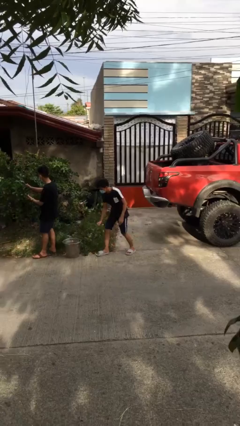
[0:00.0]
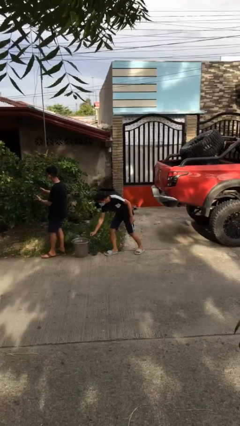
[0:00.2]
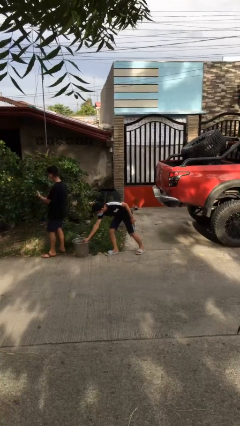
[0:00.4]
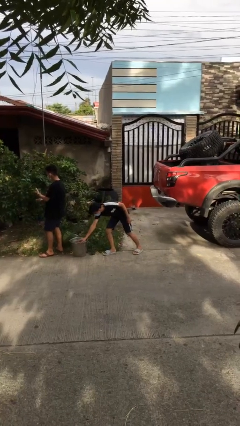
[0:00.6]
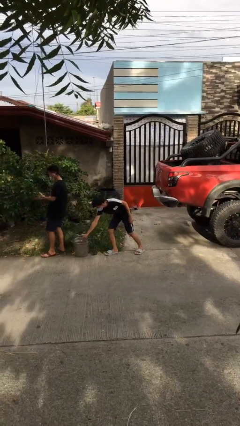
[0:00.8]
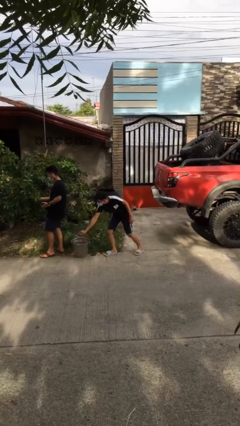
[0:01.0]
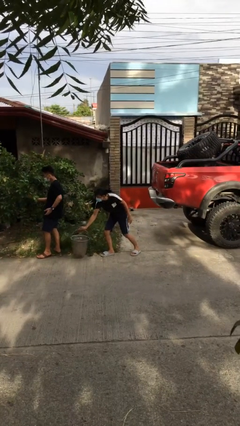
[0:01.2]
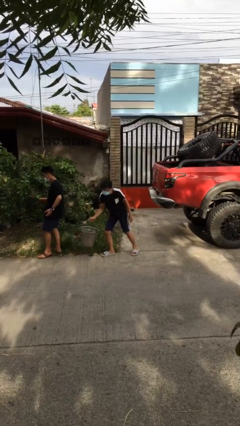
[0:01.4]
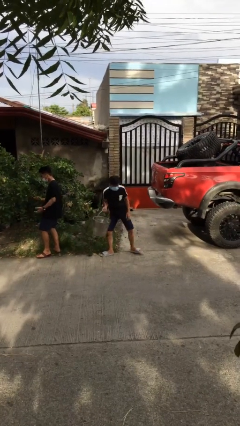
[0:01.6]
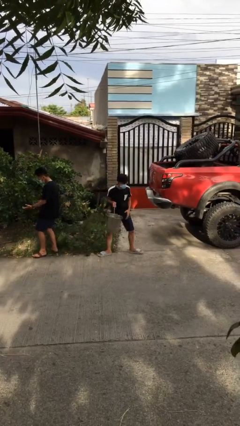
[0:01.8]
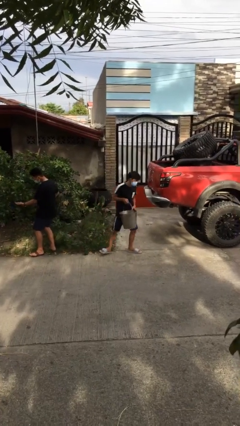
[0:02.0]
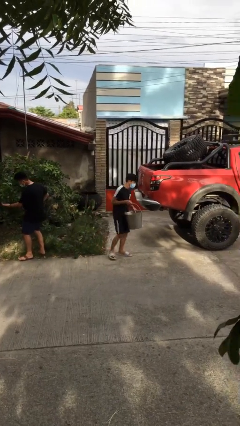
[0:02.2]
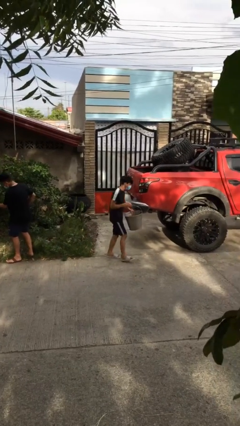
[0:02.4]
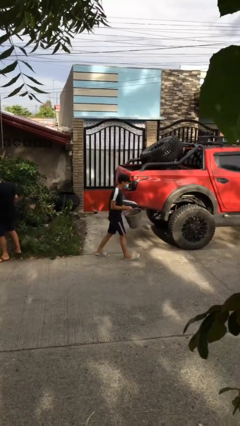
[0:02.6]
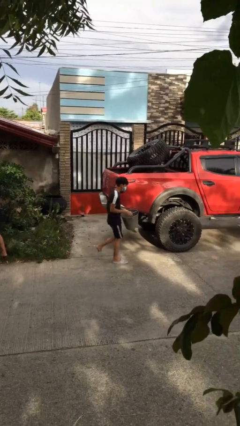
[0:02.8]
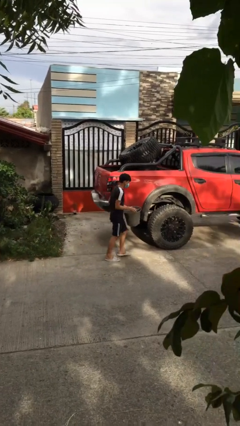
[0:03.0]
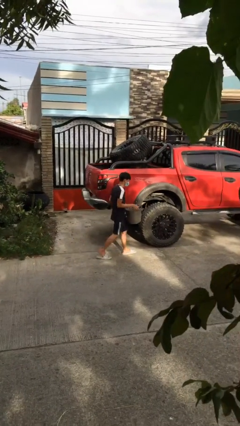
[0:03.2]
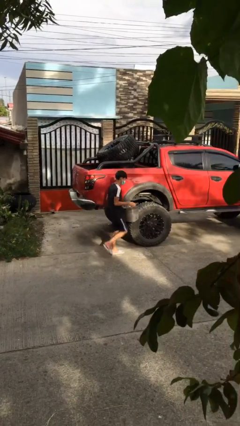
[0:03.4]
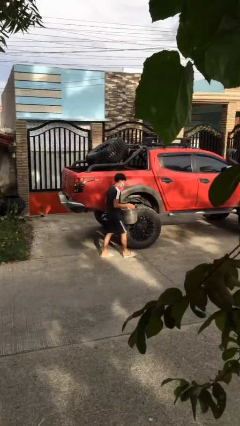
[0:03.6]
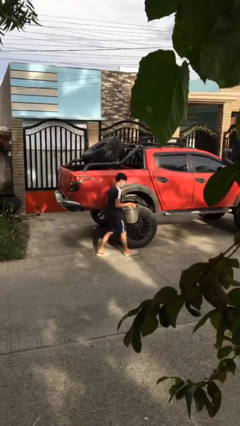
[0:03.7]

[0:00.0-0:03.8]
person steals object from person

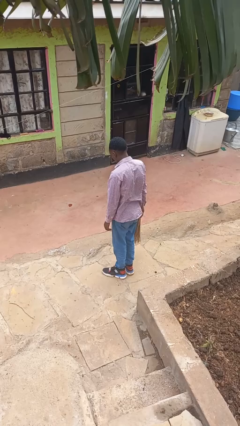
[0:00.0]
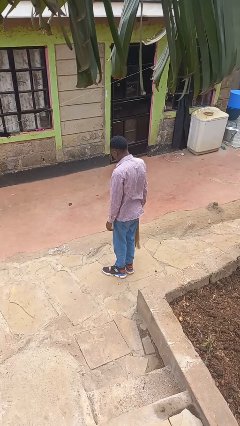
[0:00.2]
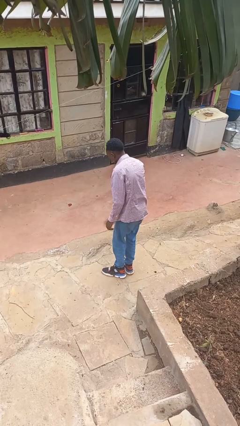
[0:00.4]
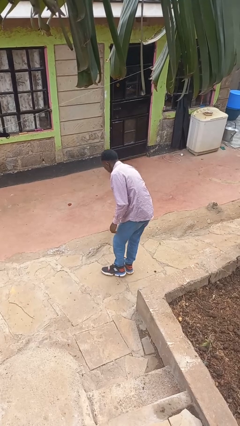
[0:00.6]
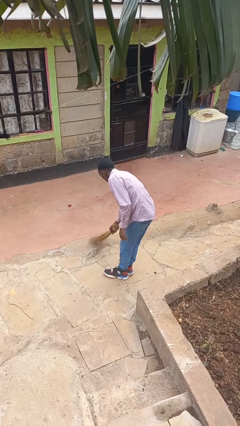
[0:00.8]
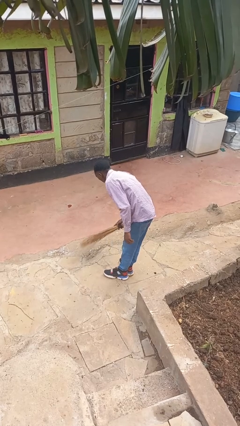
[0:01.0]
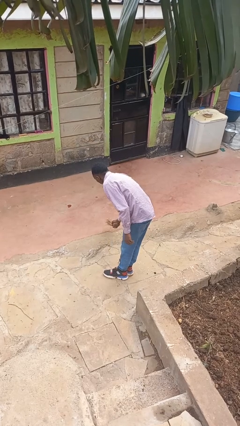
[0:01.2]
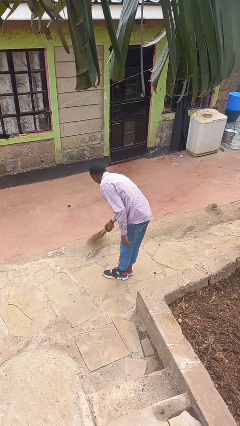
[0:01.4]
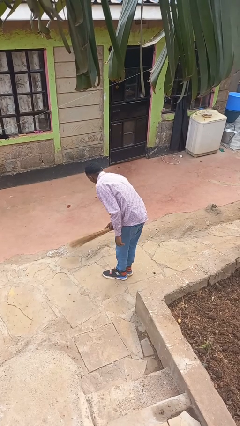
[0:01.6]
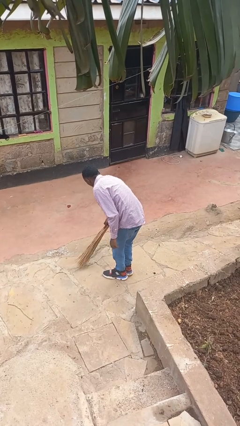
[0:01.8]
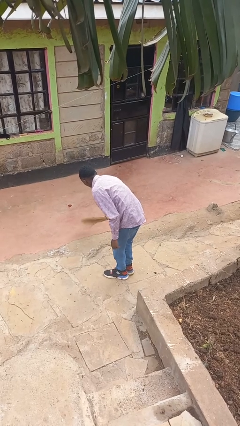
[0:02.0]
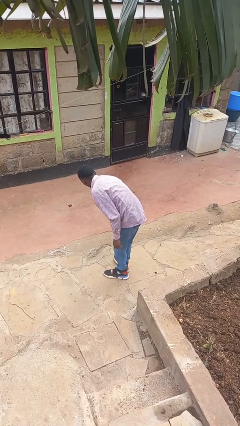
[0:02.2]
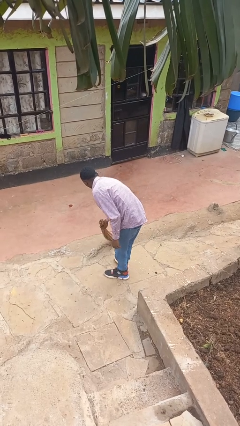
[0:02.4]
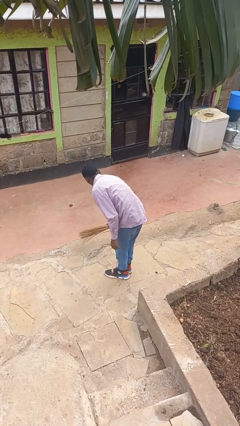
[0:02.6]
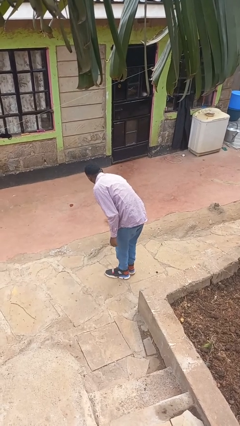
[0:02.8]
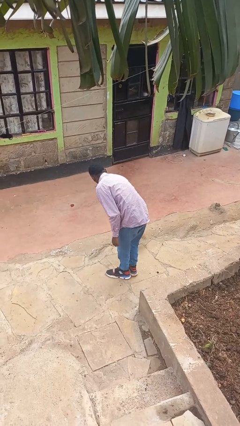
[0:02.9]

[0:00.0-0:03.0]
person sweeps floor

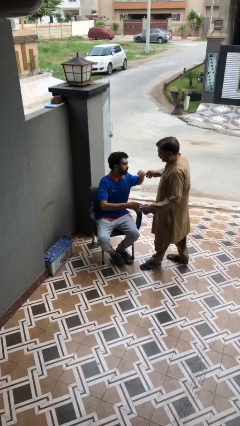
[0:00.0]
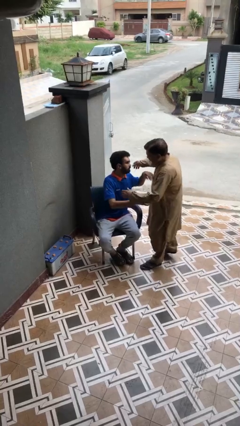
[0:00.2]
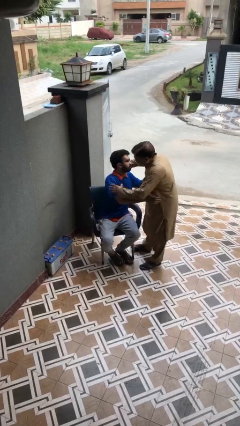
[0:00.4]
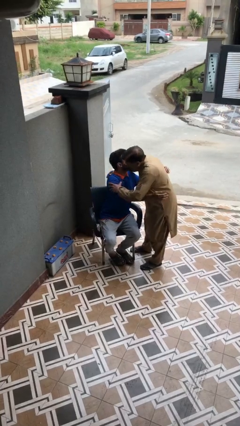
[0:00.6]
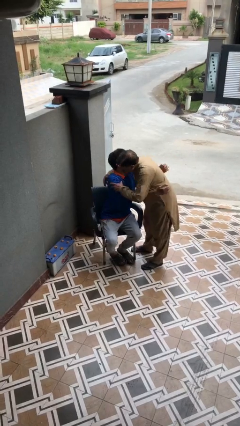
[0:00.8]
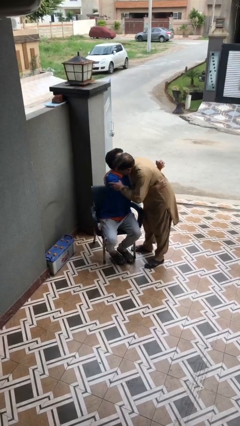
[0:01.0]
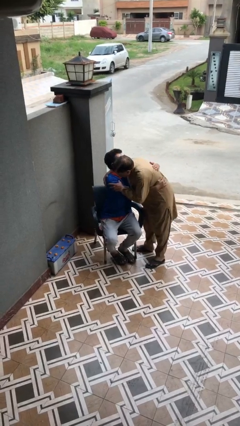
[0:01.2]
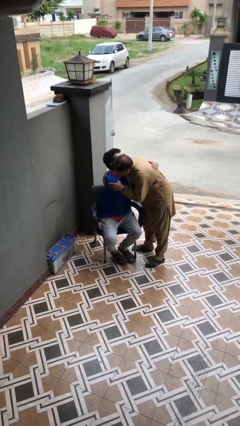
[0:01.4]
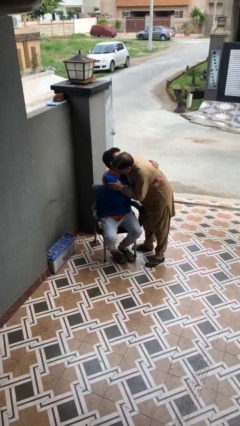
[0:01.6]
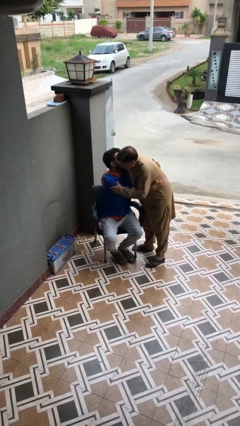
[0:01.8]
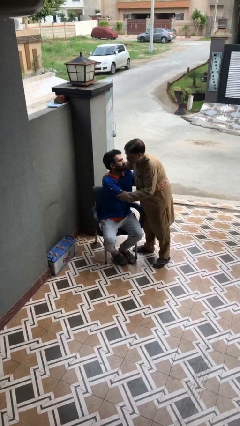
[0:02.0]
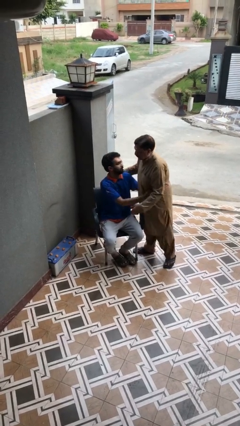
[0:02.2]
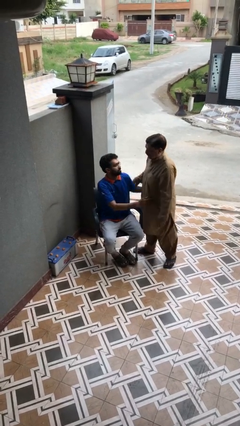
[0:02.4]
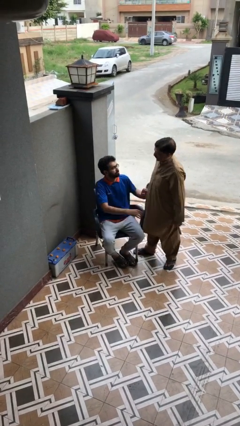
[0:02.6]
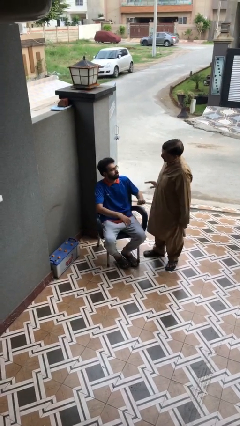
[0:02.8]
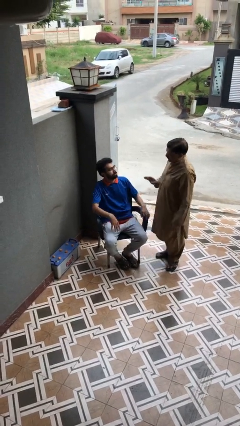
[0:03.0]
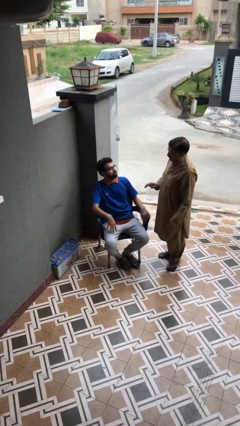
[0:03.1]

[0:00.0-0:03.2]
person embraces person

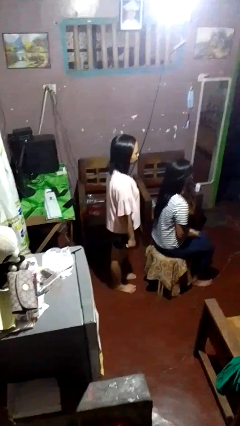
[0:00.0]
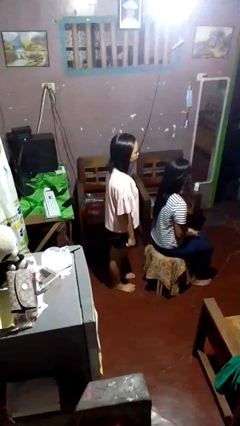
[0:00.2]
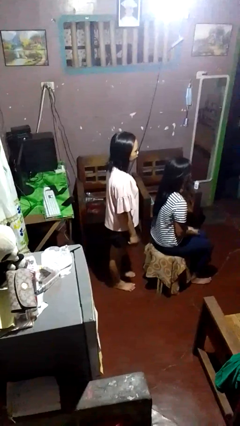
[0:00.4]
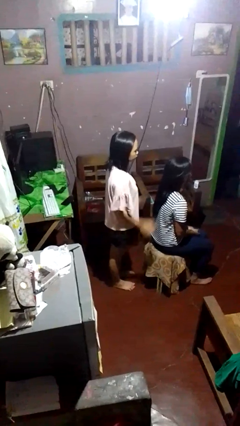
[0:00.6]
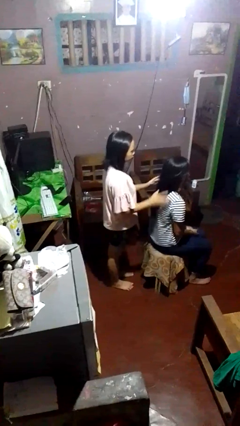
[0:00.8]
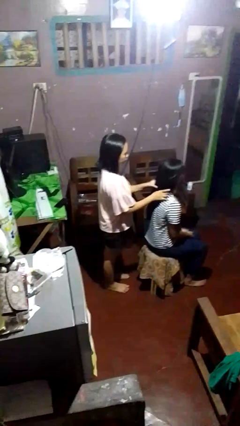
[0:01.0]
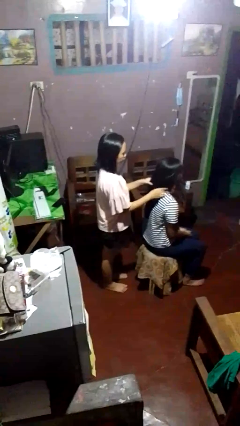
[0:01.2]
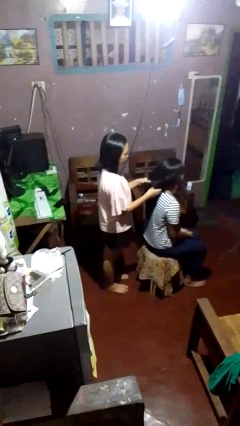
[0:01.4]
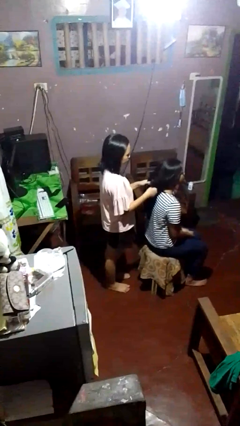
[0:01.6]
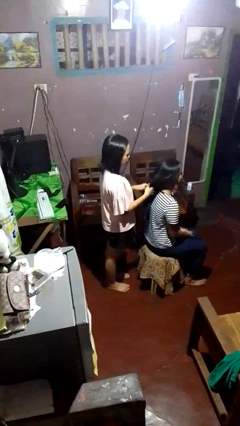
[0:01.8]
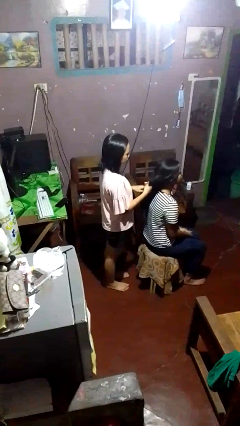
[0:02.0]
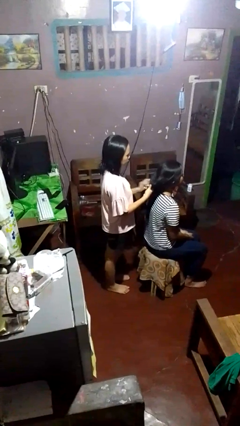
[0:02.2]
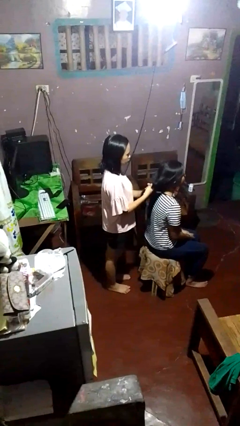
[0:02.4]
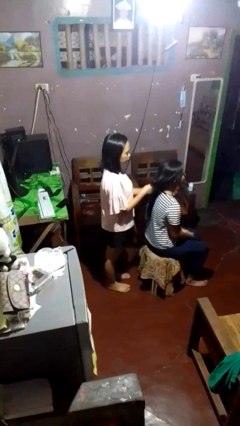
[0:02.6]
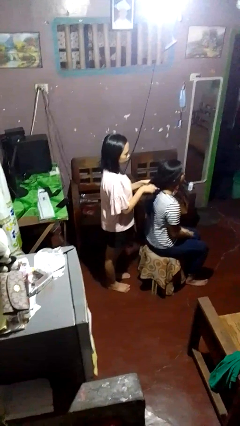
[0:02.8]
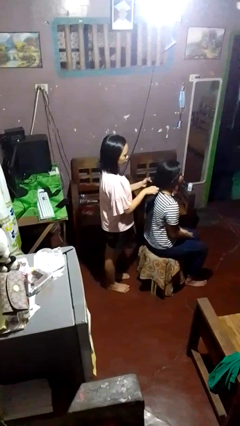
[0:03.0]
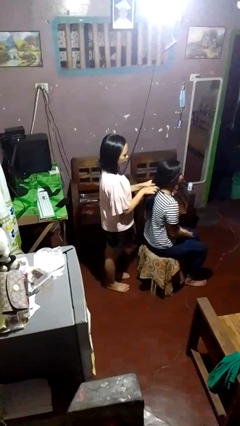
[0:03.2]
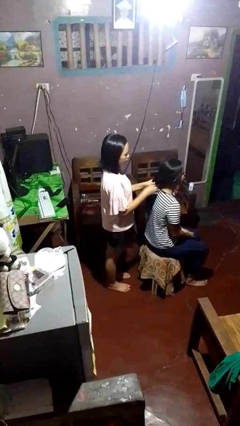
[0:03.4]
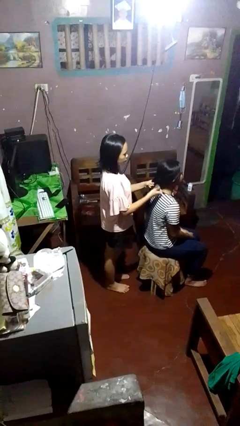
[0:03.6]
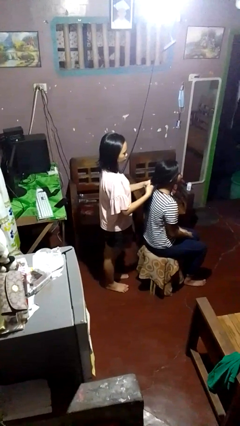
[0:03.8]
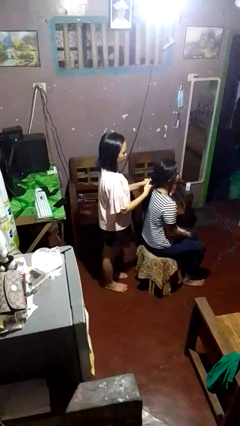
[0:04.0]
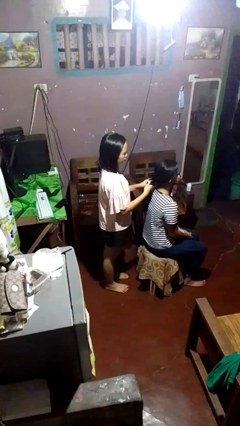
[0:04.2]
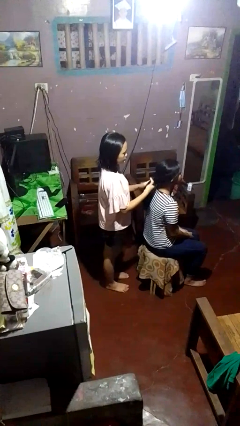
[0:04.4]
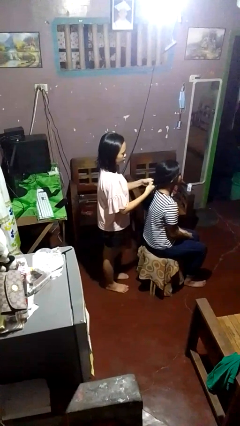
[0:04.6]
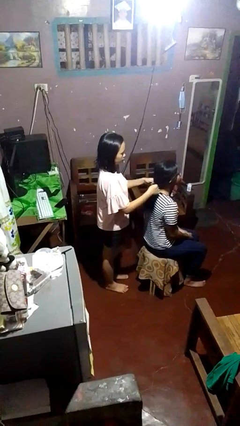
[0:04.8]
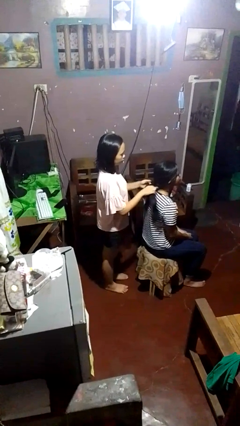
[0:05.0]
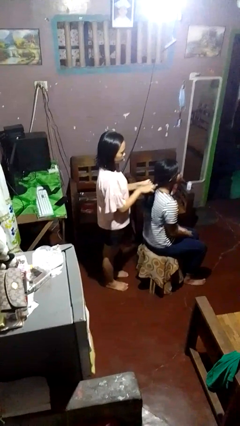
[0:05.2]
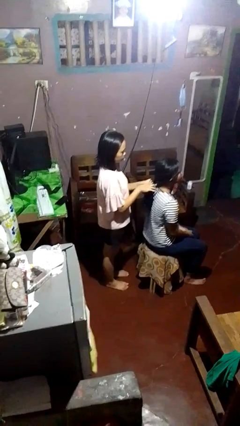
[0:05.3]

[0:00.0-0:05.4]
person braids hair of person

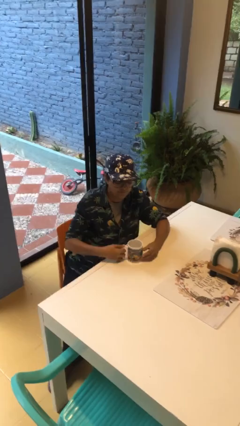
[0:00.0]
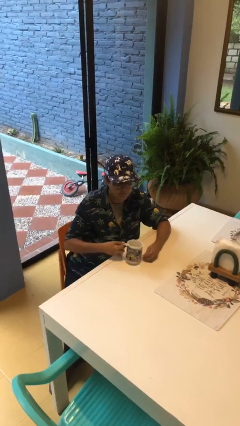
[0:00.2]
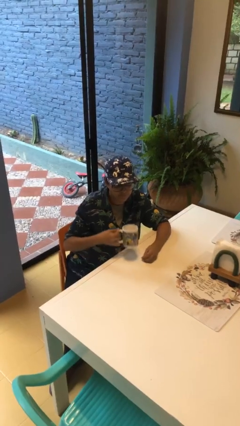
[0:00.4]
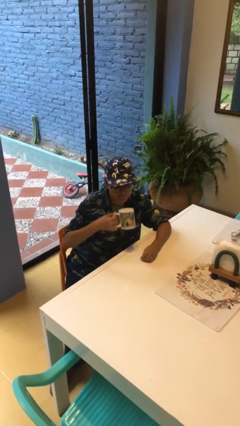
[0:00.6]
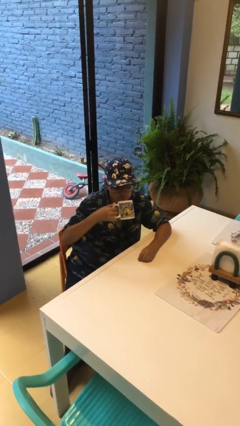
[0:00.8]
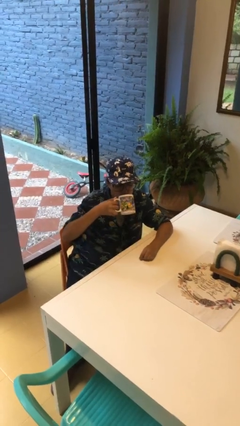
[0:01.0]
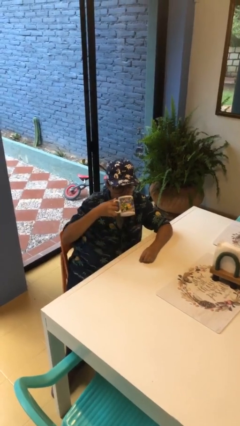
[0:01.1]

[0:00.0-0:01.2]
person picks up object from table

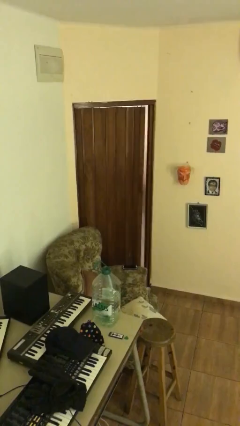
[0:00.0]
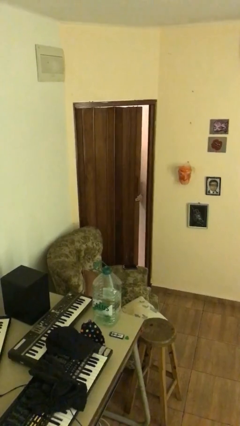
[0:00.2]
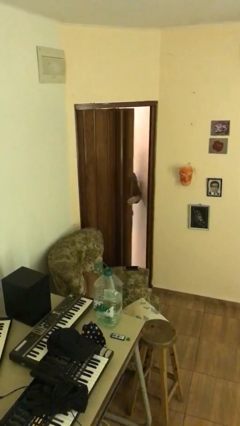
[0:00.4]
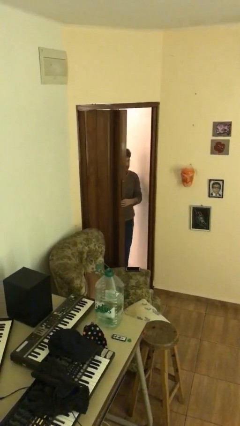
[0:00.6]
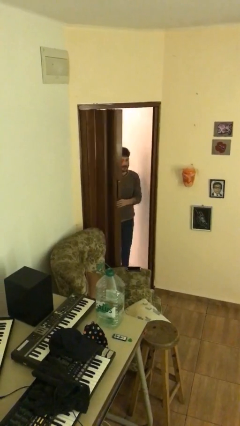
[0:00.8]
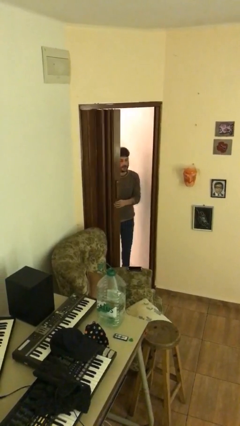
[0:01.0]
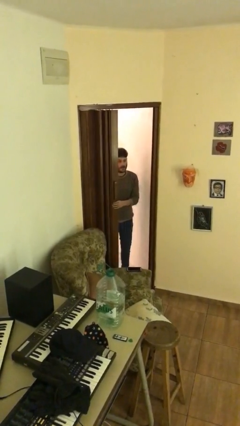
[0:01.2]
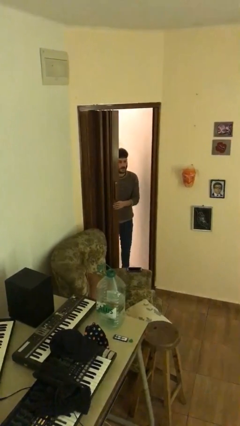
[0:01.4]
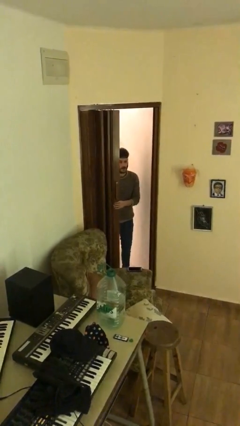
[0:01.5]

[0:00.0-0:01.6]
person opens sliding door
